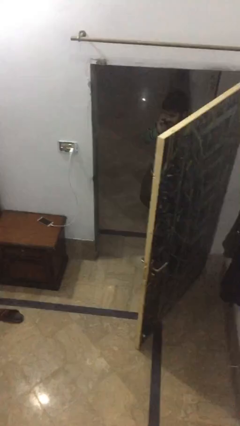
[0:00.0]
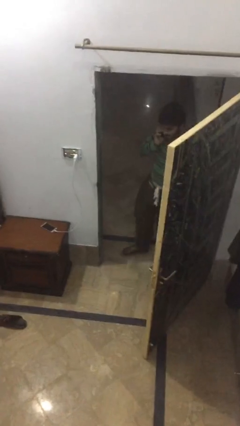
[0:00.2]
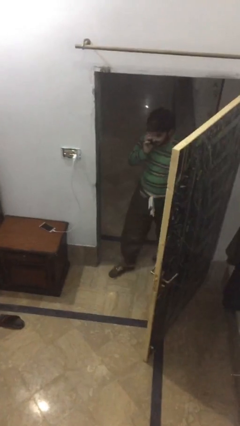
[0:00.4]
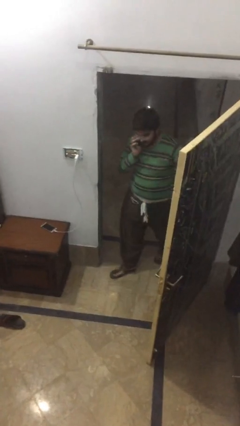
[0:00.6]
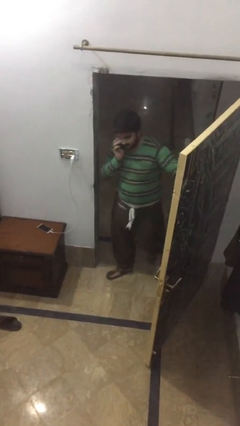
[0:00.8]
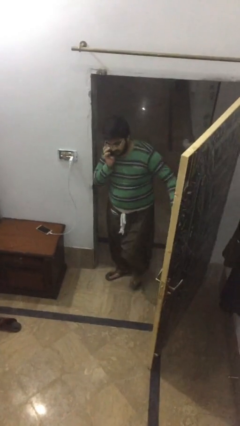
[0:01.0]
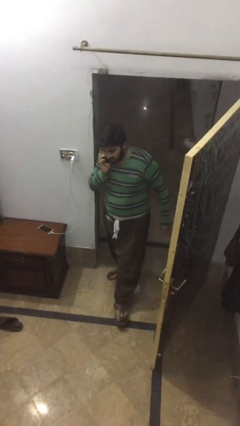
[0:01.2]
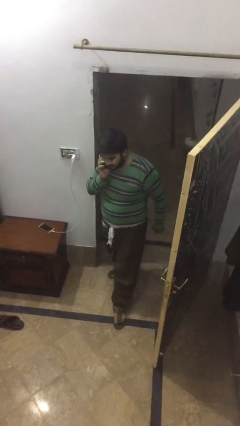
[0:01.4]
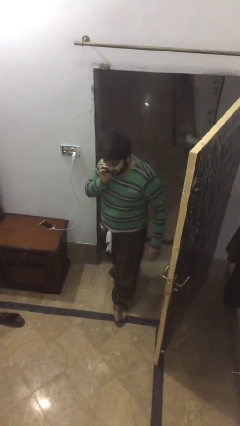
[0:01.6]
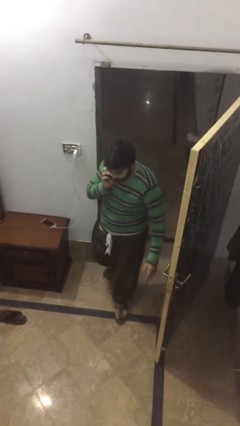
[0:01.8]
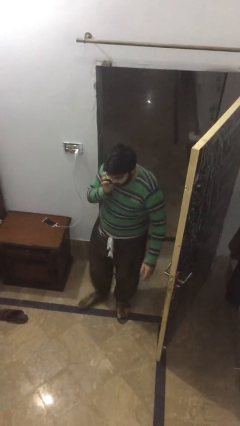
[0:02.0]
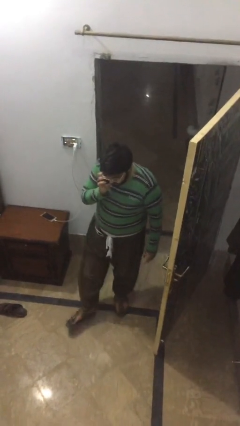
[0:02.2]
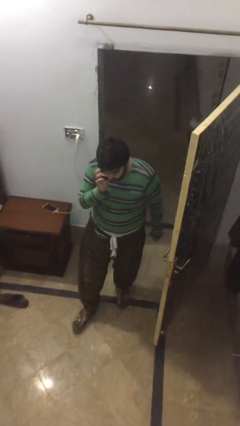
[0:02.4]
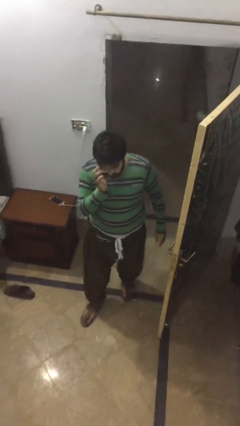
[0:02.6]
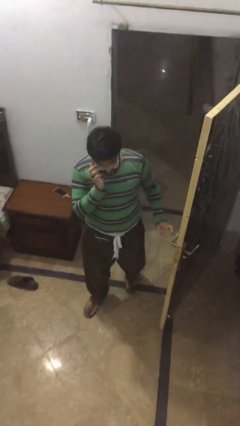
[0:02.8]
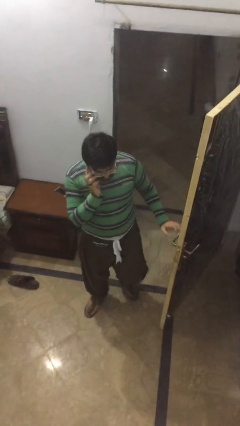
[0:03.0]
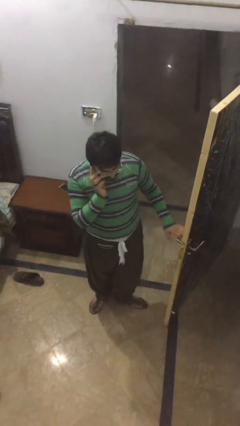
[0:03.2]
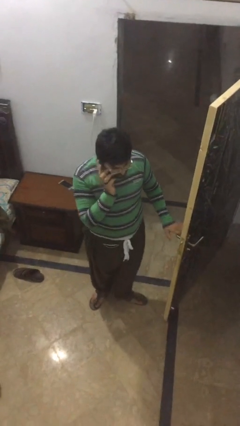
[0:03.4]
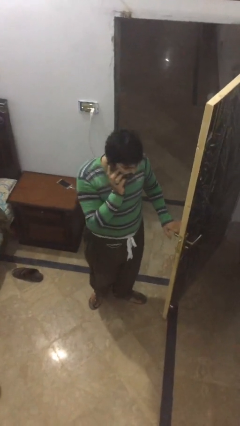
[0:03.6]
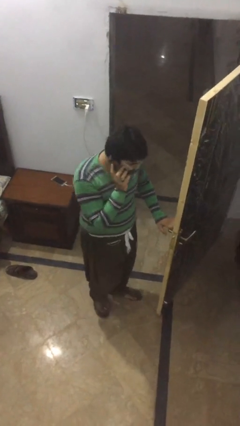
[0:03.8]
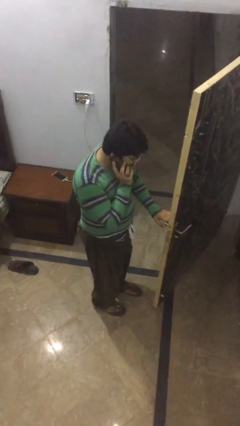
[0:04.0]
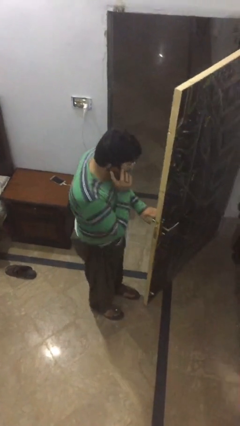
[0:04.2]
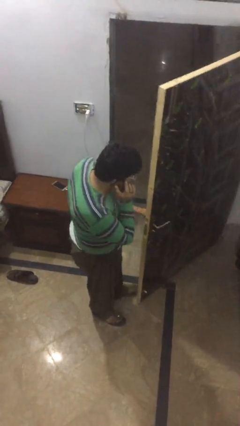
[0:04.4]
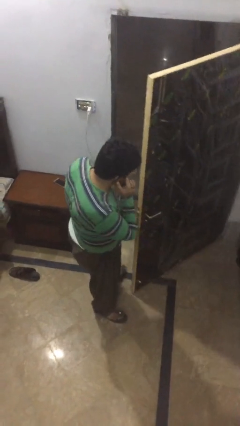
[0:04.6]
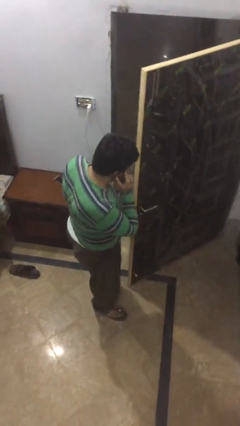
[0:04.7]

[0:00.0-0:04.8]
person enters scene through structure

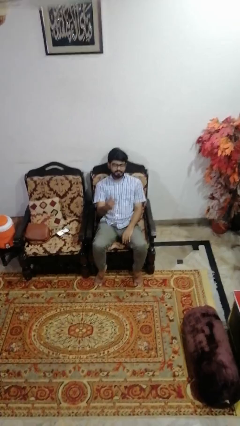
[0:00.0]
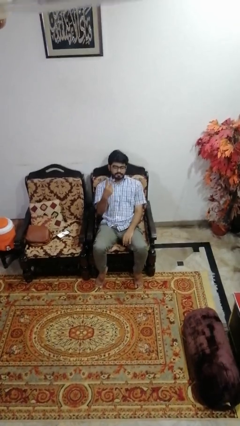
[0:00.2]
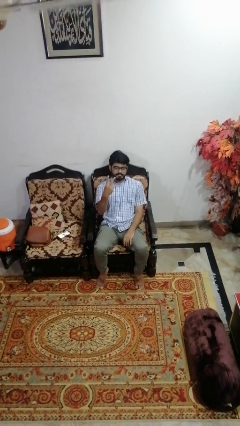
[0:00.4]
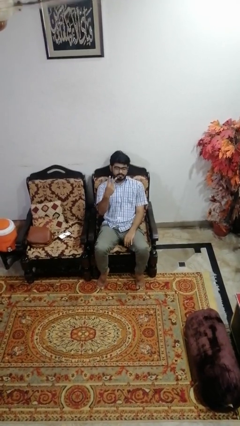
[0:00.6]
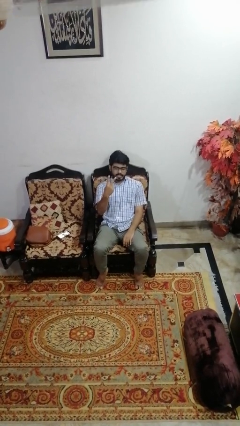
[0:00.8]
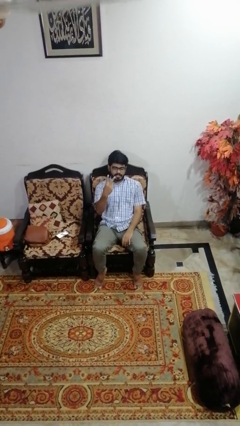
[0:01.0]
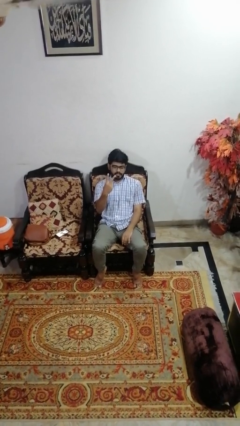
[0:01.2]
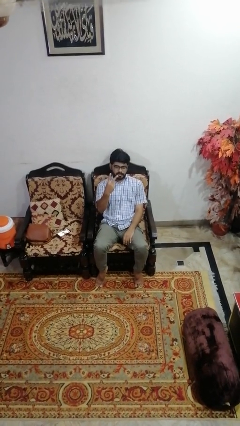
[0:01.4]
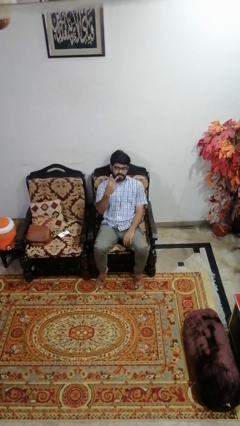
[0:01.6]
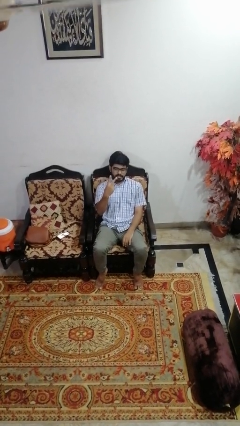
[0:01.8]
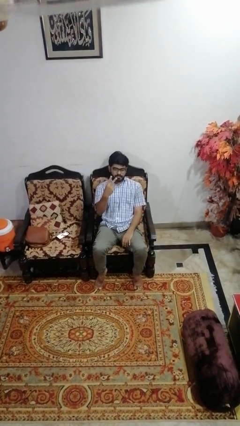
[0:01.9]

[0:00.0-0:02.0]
person gestures peace

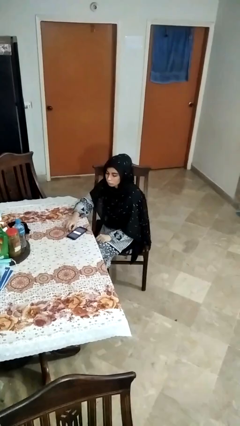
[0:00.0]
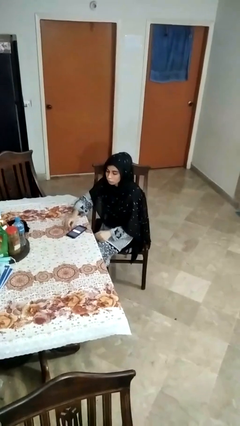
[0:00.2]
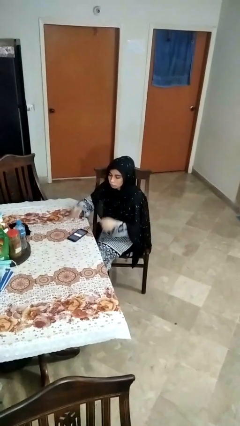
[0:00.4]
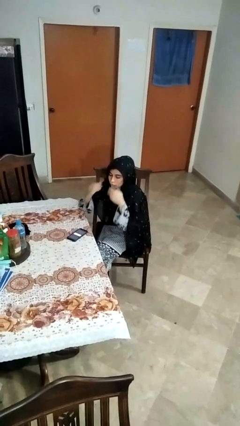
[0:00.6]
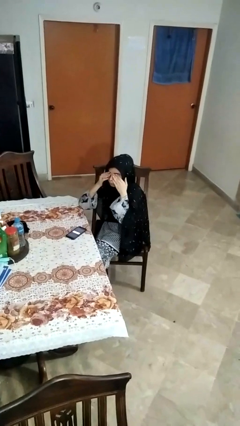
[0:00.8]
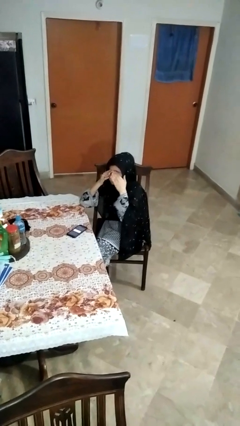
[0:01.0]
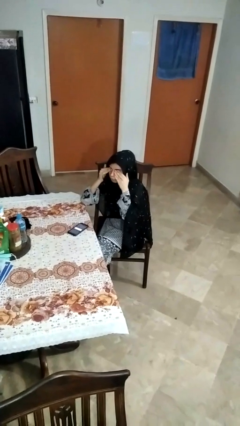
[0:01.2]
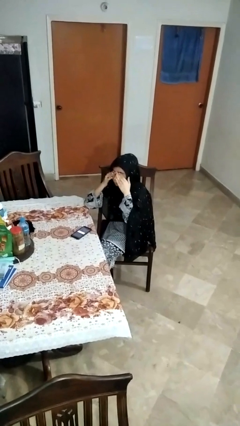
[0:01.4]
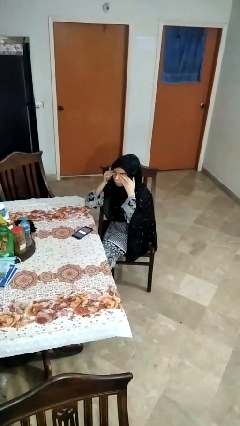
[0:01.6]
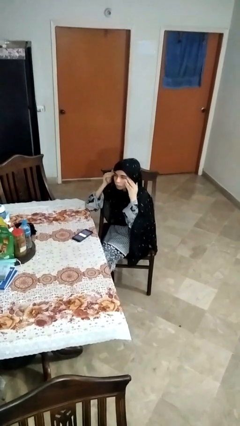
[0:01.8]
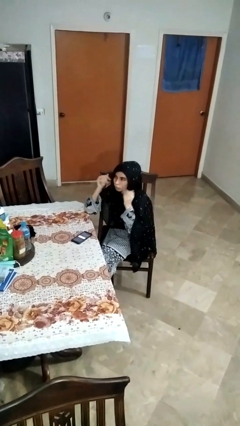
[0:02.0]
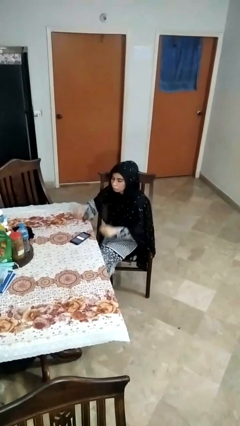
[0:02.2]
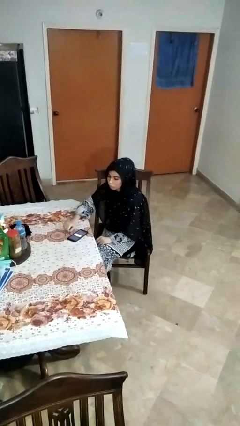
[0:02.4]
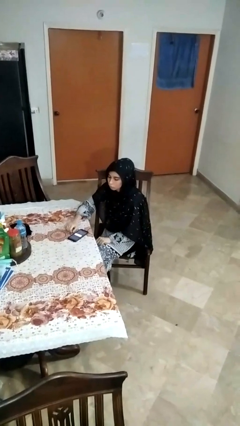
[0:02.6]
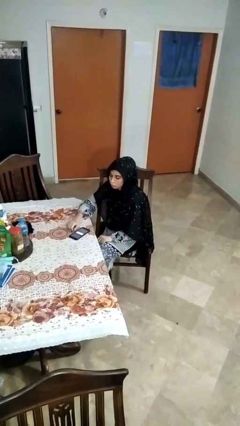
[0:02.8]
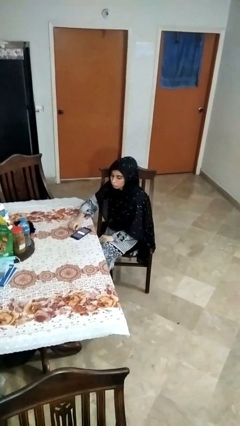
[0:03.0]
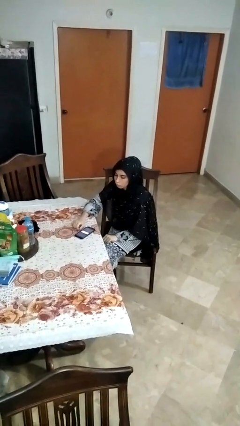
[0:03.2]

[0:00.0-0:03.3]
person rubs eyes

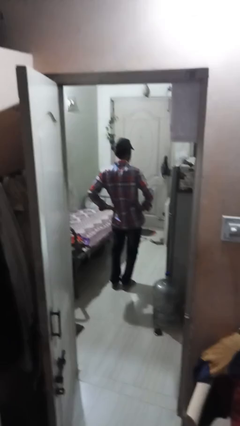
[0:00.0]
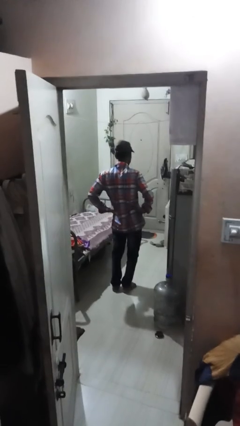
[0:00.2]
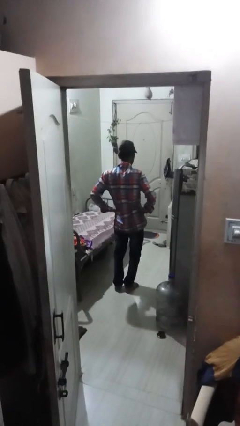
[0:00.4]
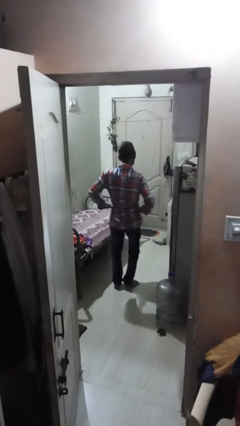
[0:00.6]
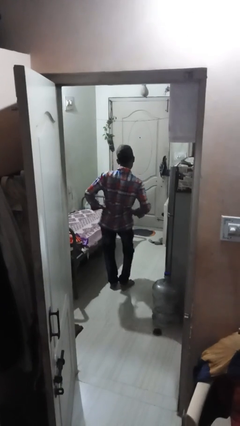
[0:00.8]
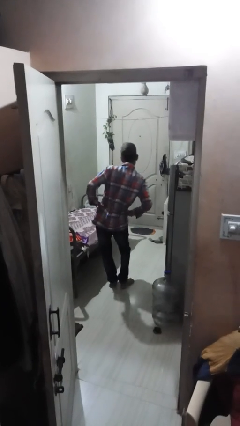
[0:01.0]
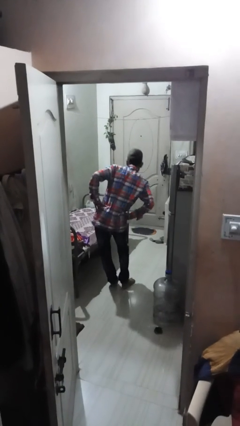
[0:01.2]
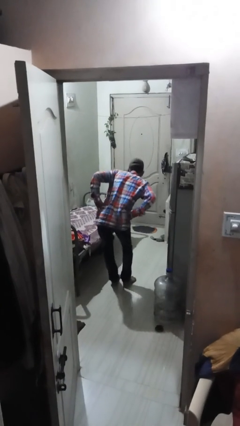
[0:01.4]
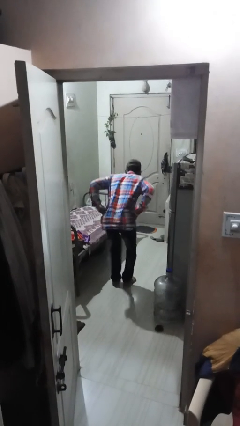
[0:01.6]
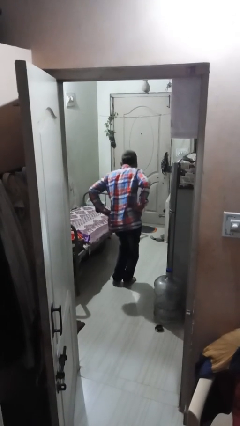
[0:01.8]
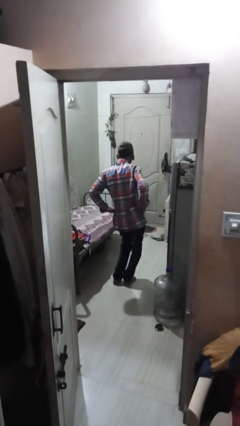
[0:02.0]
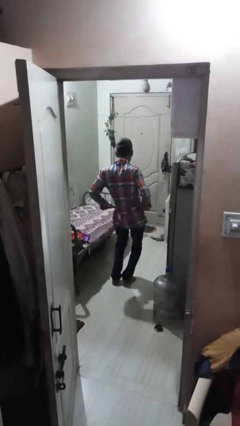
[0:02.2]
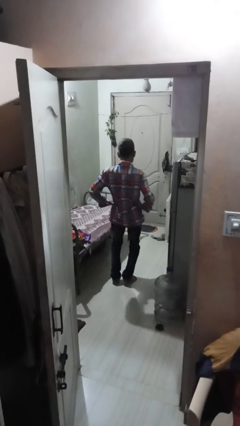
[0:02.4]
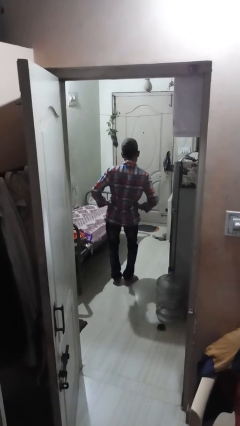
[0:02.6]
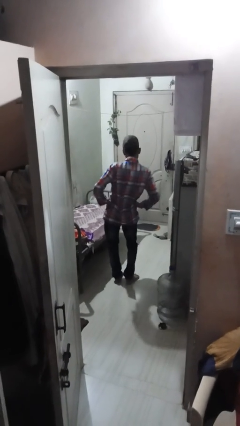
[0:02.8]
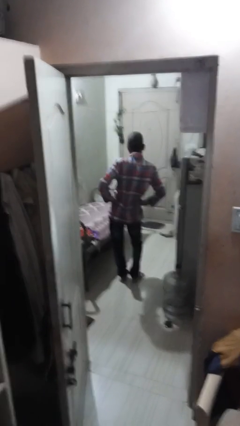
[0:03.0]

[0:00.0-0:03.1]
person wiggles hips

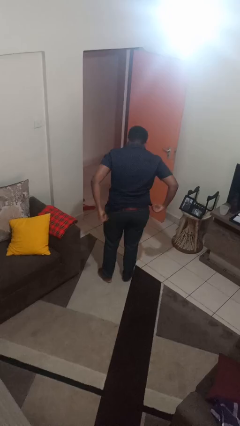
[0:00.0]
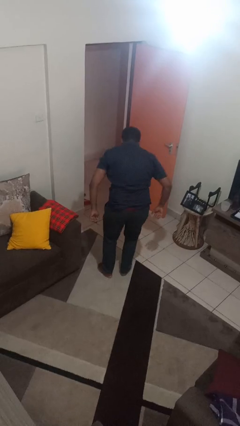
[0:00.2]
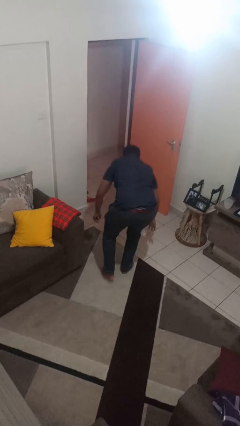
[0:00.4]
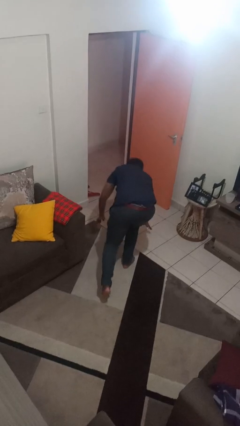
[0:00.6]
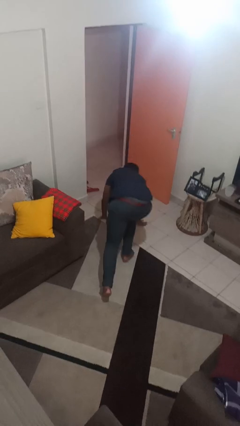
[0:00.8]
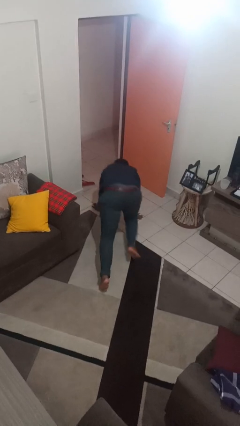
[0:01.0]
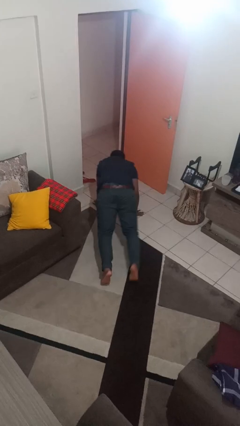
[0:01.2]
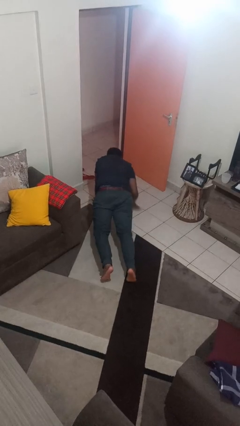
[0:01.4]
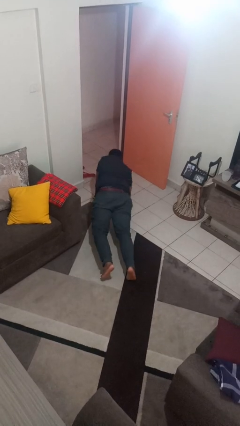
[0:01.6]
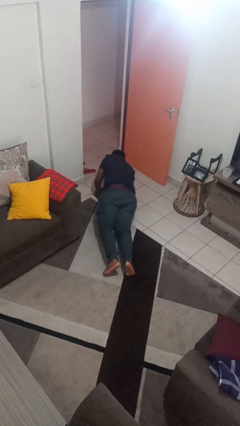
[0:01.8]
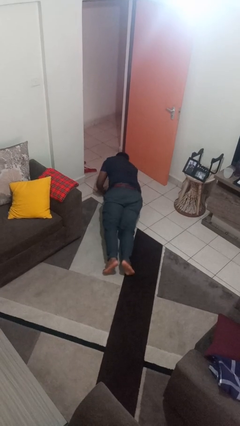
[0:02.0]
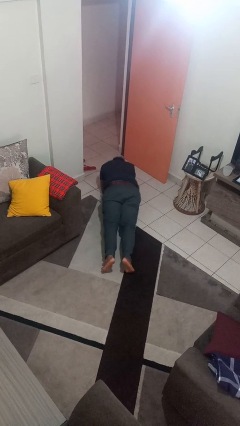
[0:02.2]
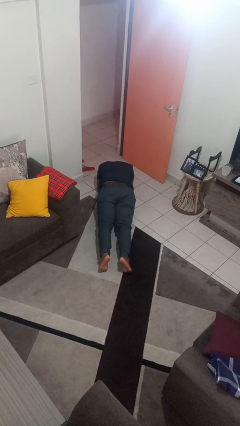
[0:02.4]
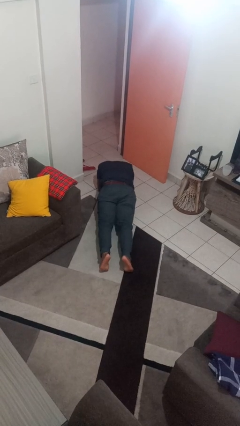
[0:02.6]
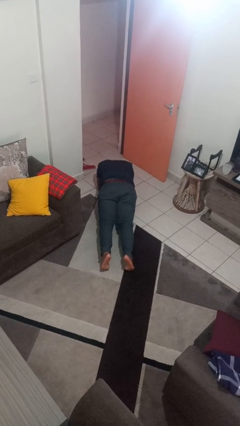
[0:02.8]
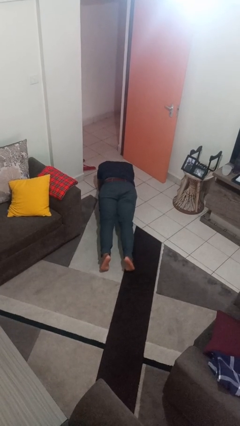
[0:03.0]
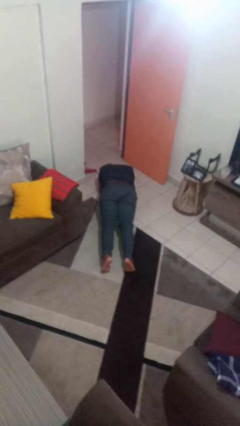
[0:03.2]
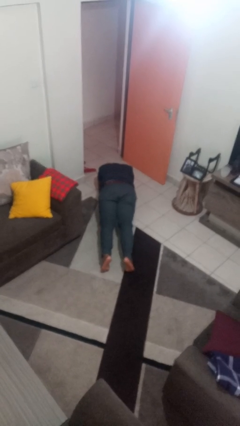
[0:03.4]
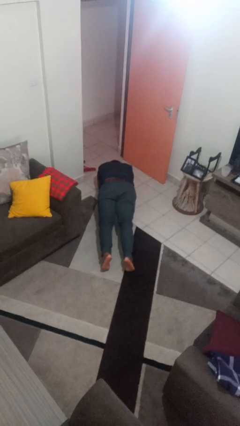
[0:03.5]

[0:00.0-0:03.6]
person exercises with plank

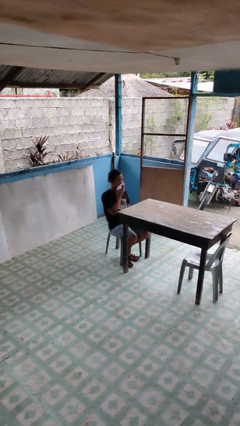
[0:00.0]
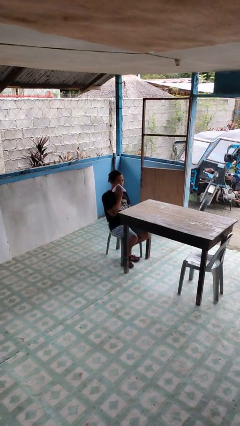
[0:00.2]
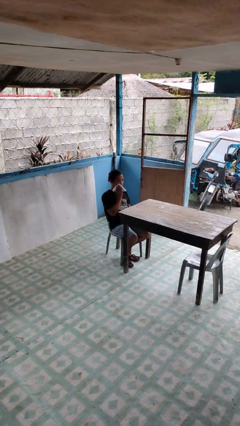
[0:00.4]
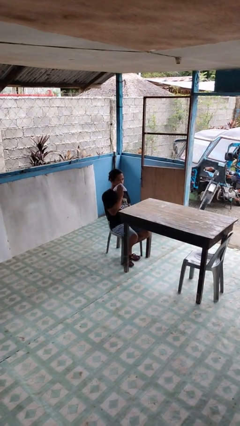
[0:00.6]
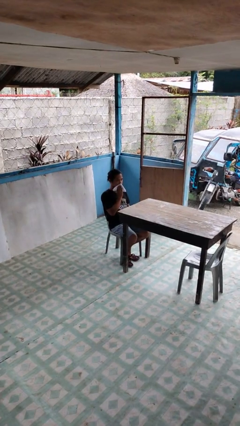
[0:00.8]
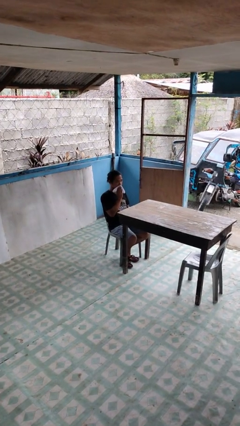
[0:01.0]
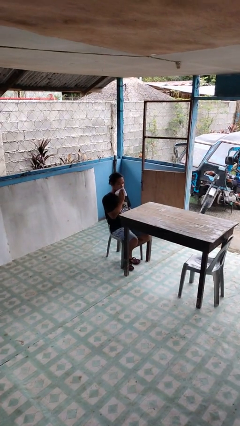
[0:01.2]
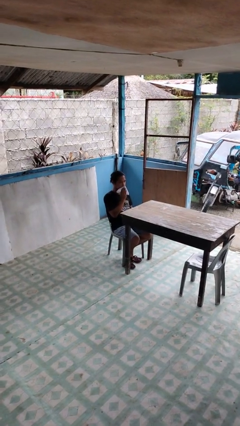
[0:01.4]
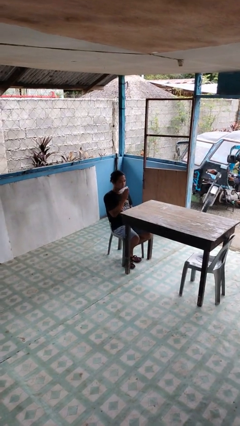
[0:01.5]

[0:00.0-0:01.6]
person wipes mouth with napkin
